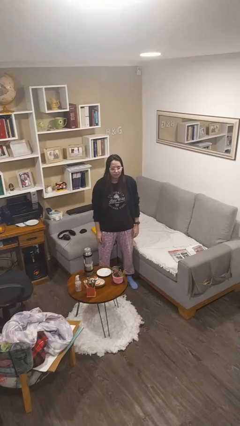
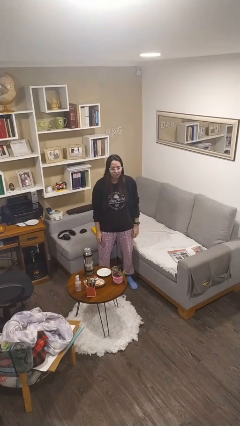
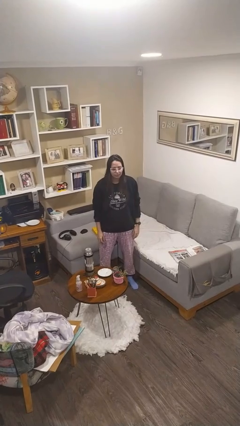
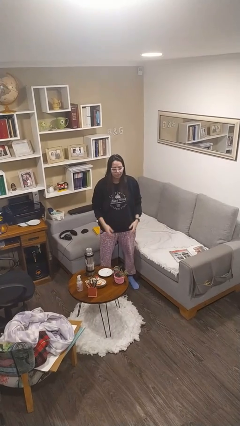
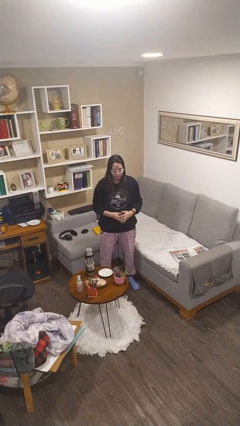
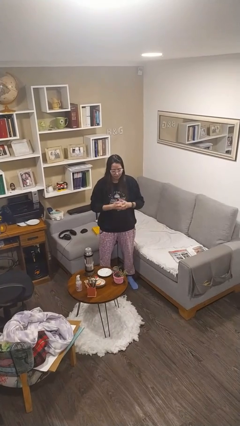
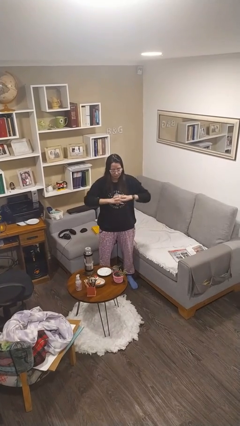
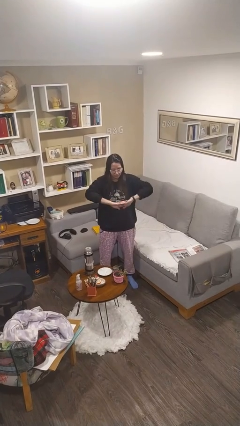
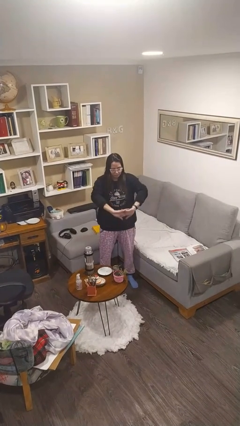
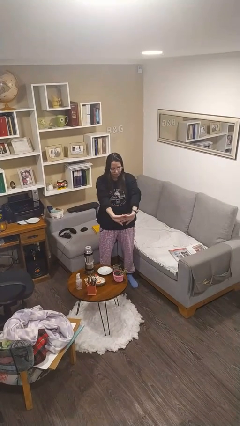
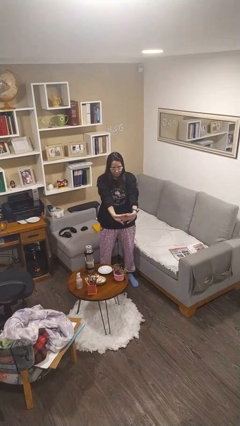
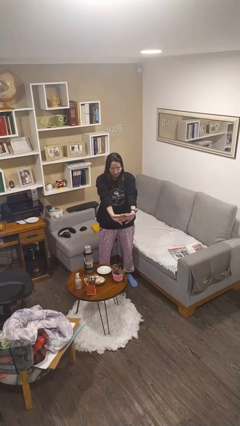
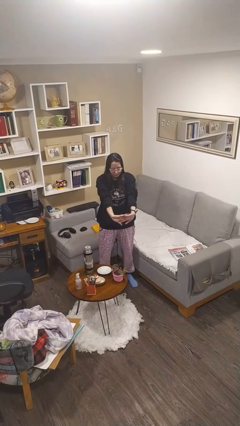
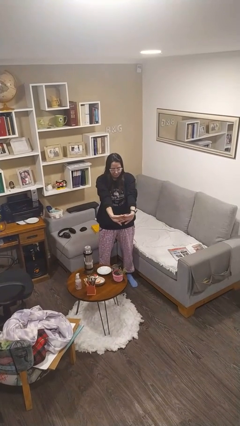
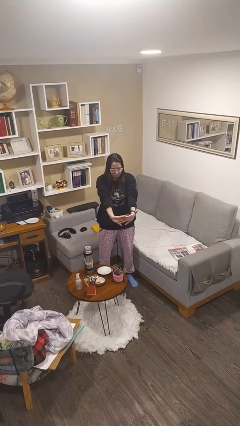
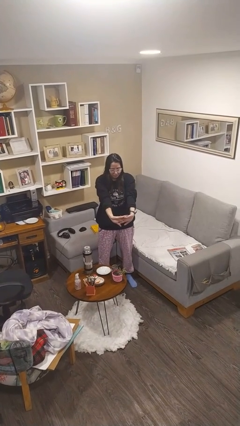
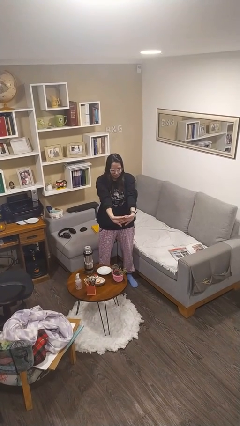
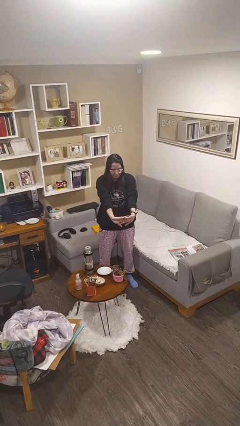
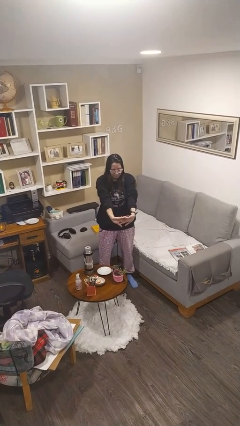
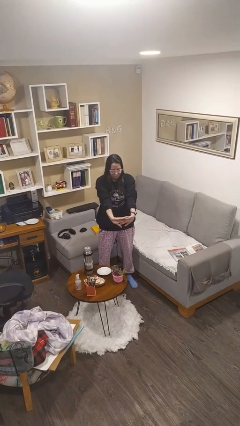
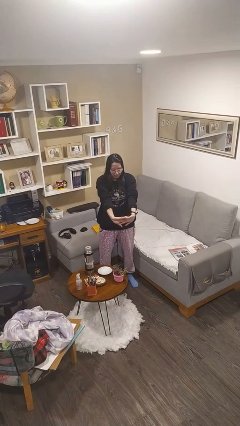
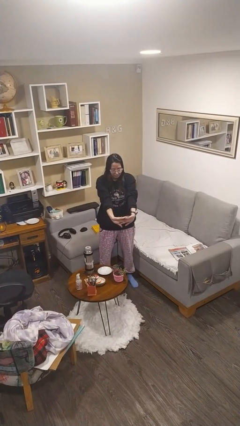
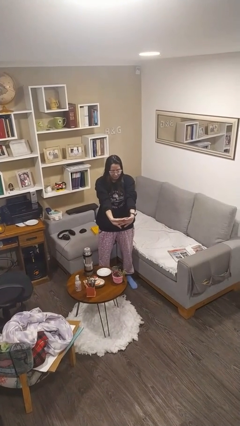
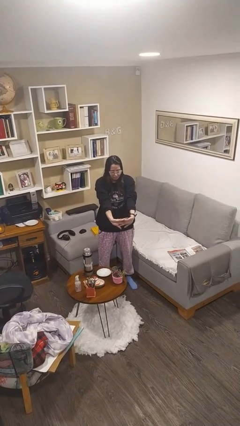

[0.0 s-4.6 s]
person cracks knuckles

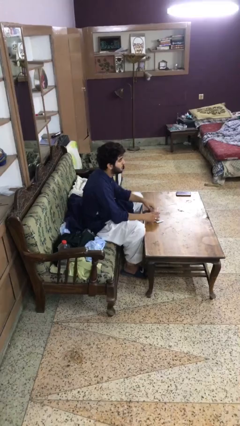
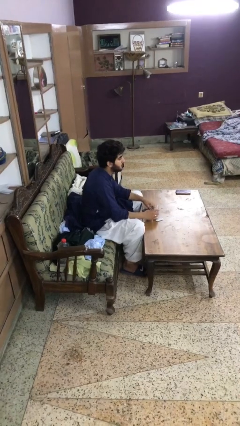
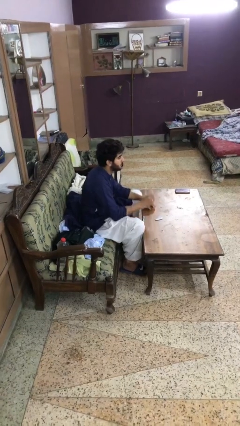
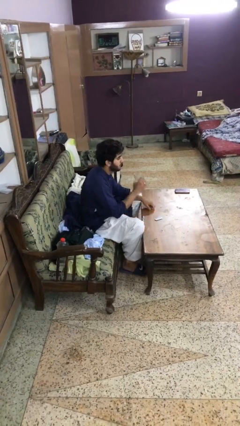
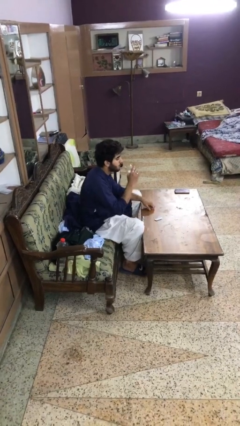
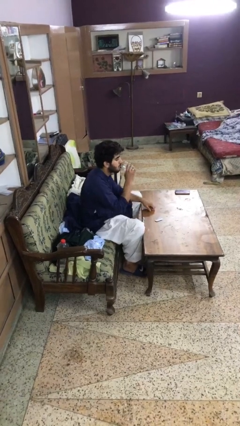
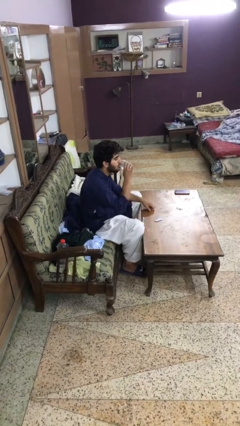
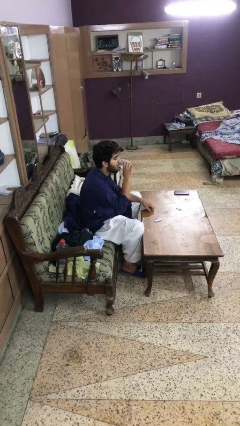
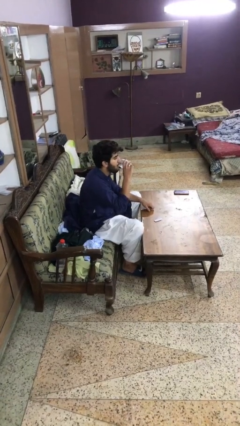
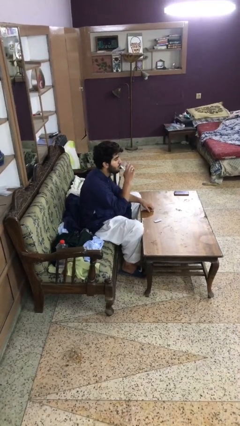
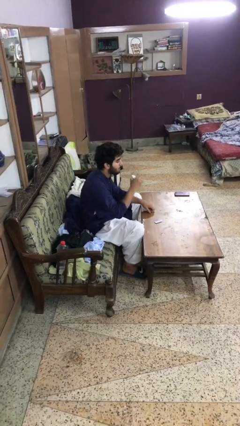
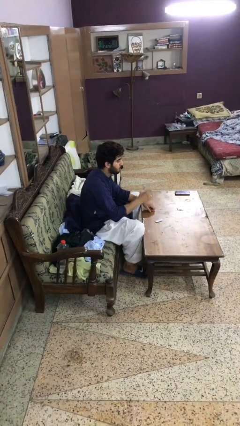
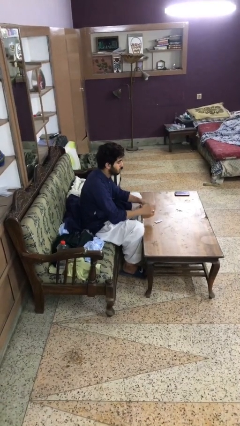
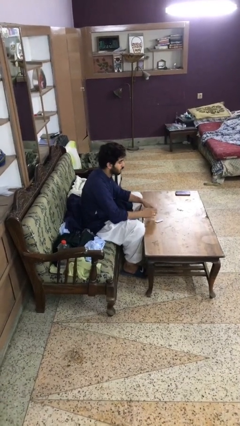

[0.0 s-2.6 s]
person drinks from cup

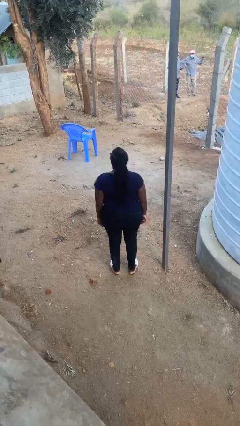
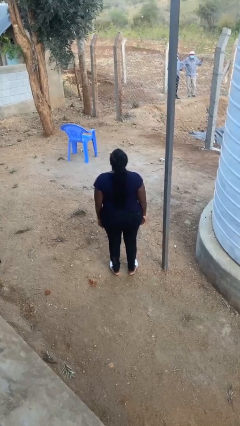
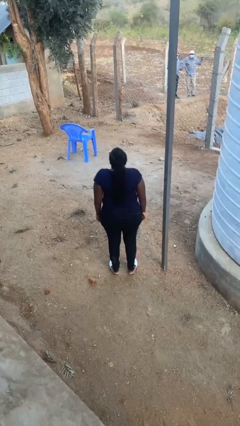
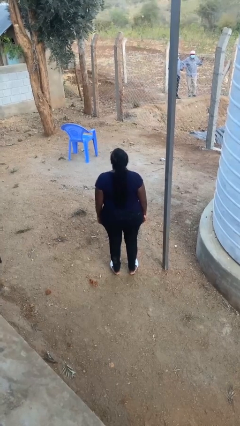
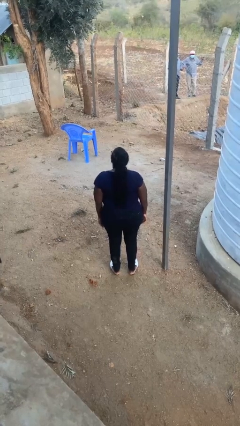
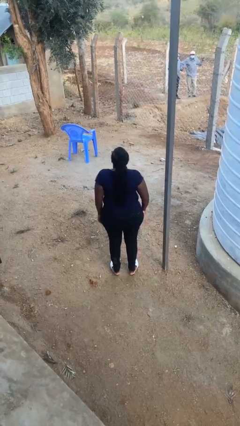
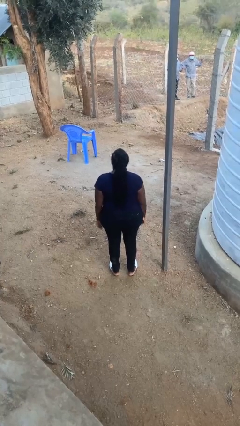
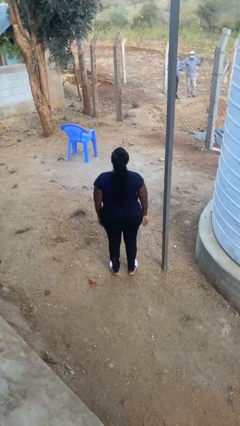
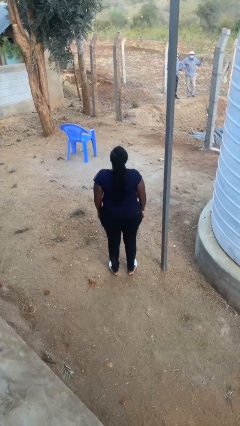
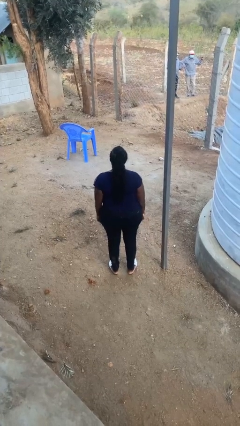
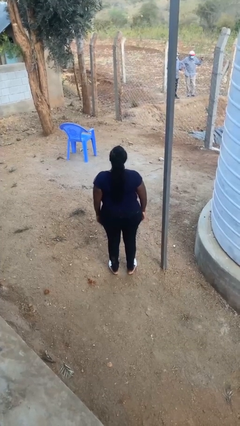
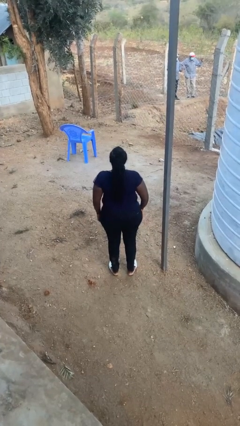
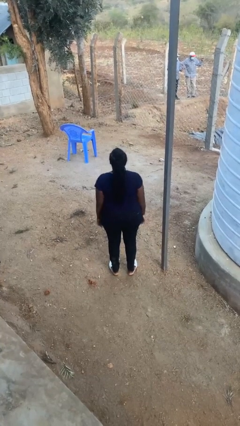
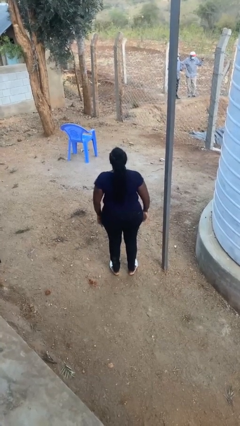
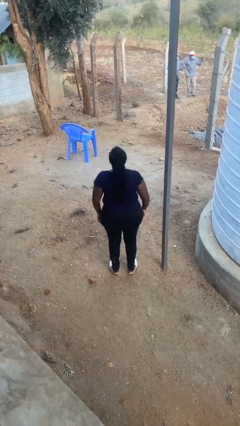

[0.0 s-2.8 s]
person shrugs

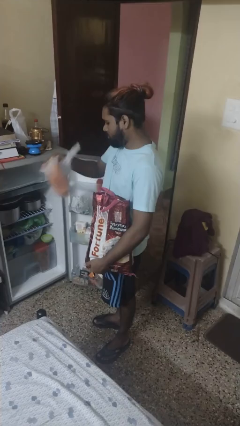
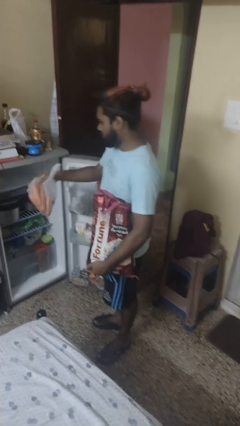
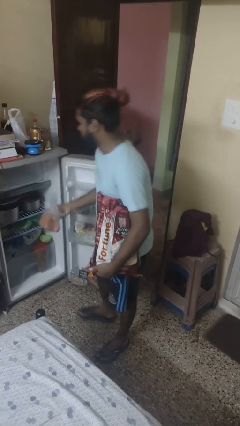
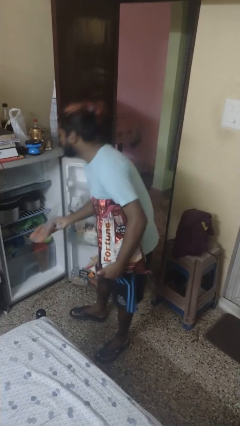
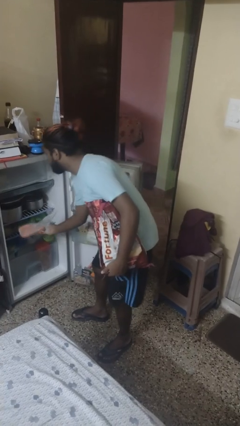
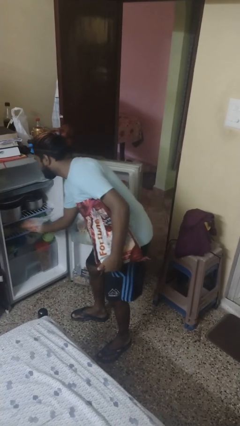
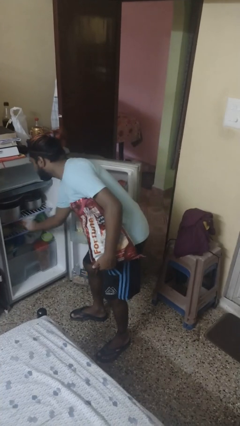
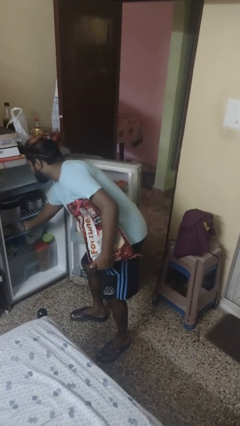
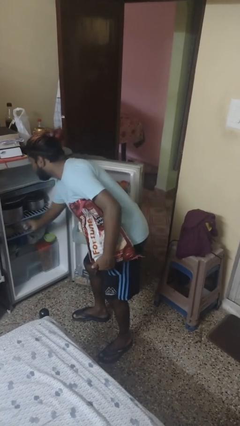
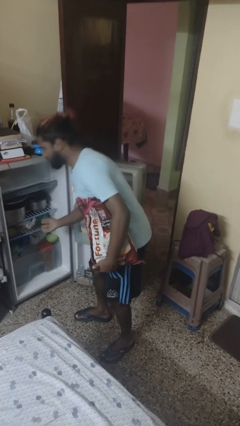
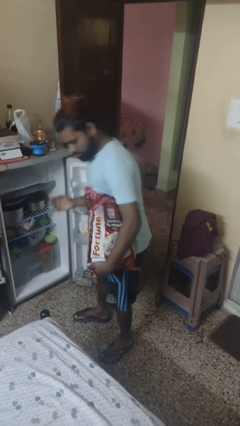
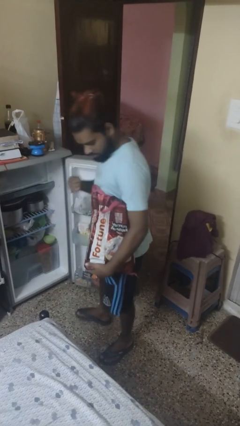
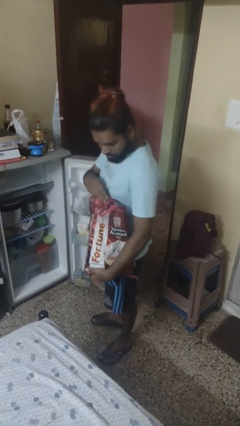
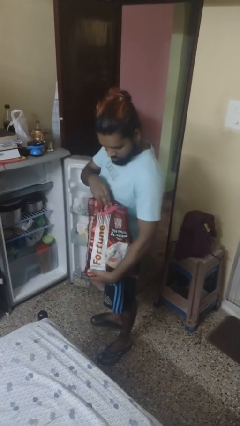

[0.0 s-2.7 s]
person loads groceries into refrigerator

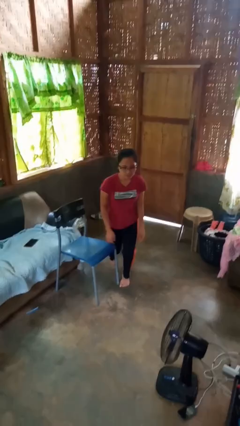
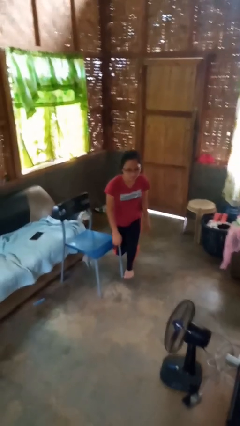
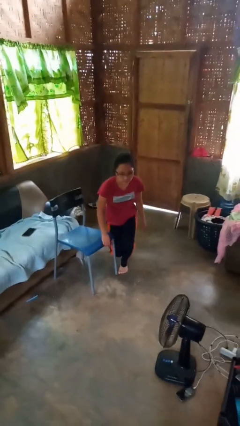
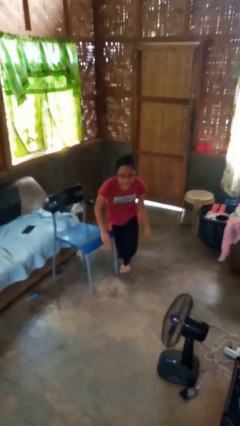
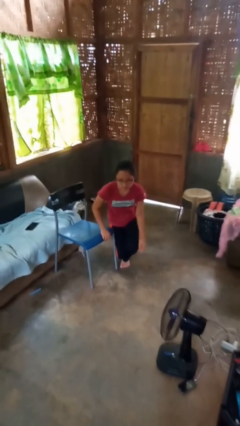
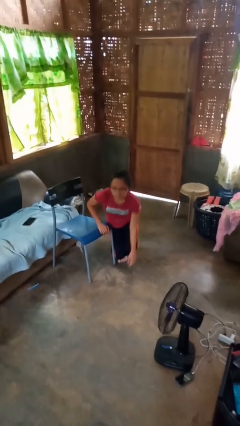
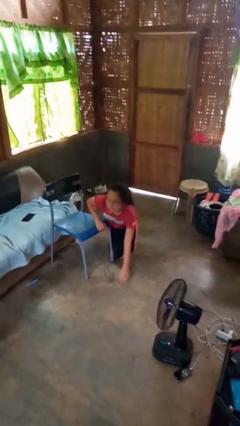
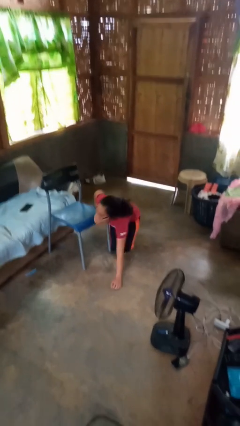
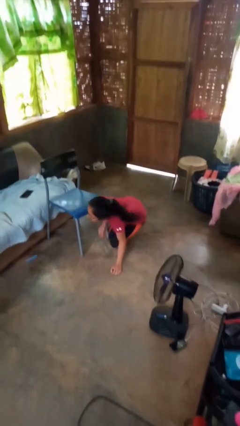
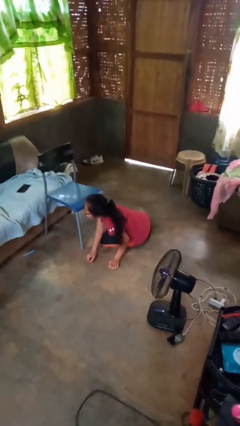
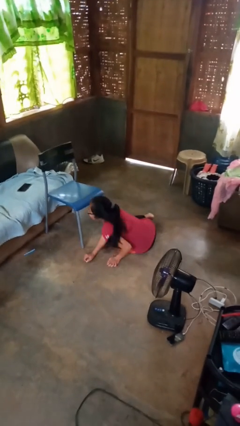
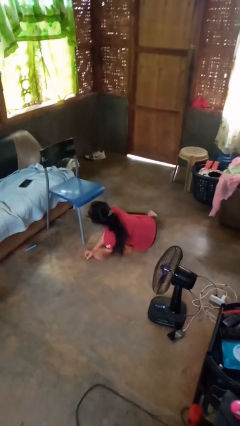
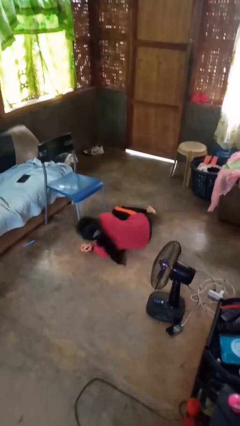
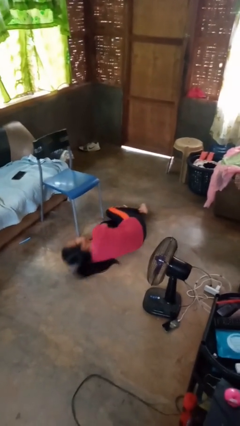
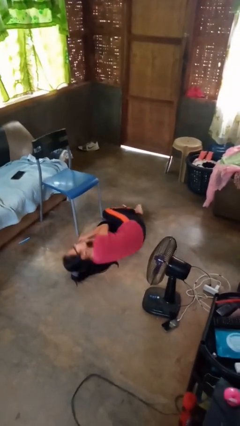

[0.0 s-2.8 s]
person trips on object on floor

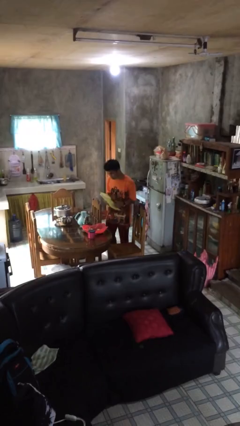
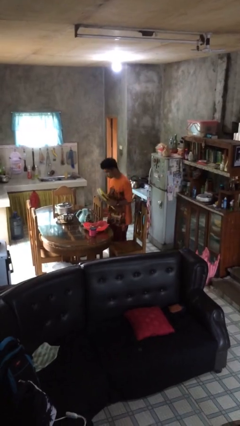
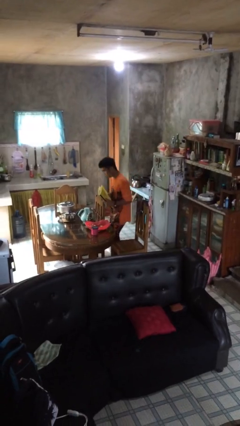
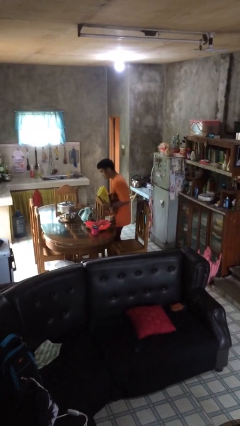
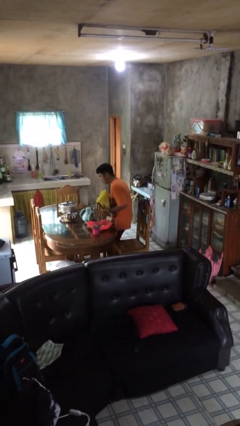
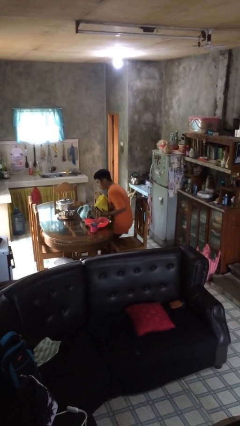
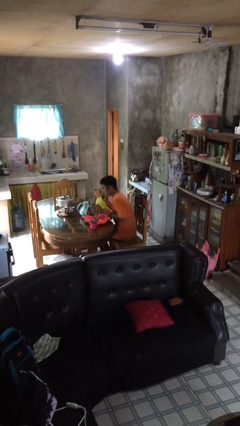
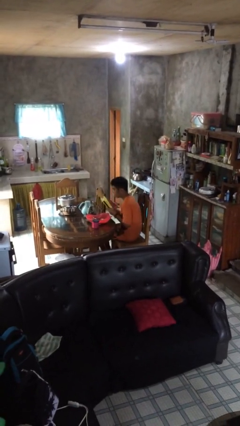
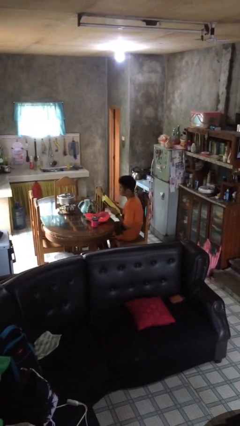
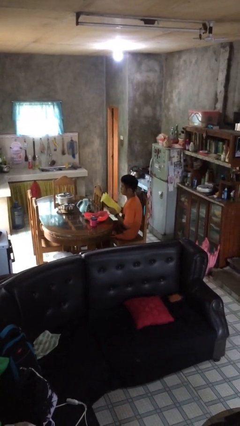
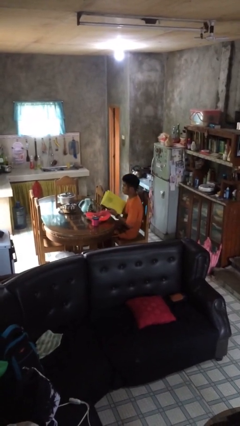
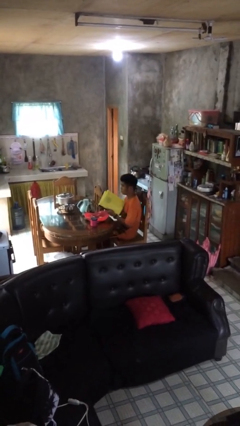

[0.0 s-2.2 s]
person sits down
